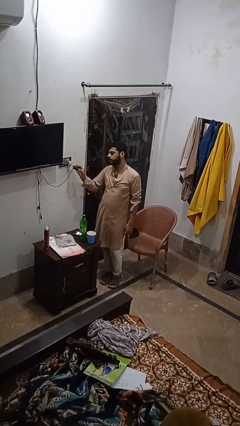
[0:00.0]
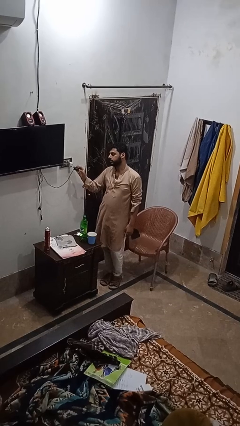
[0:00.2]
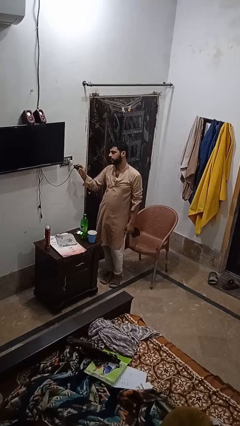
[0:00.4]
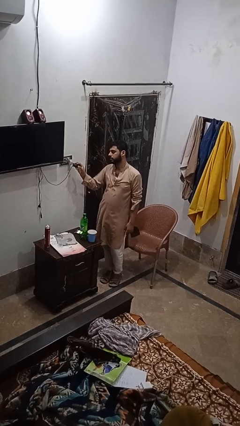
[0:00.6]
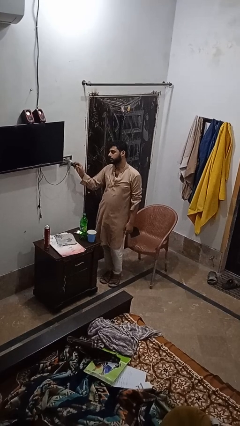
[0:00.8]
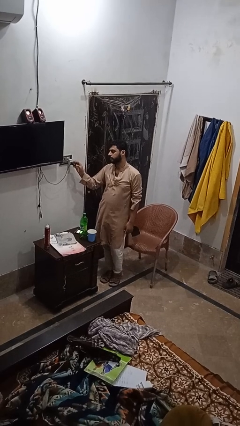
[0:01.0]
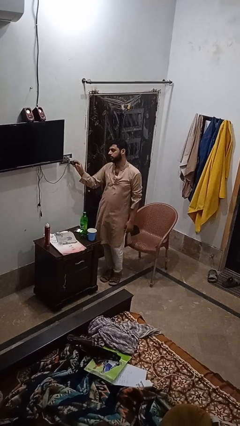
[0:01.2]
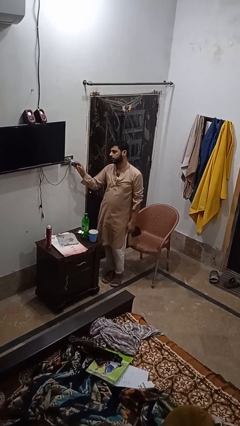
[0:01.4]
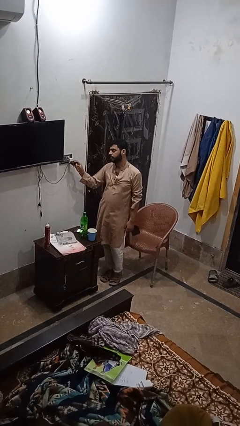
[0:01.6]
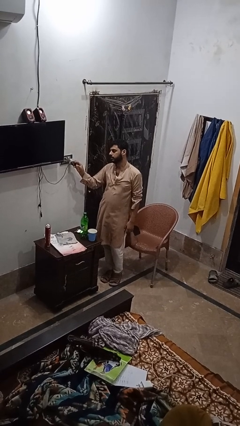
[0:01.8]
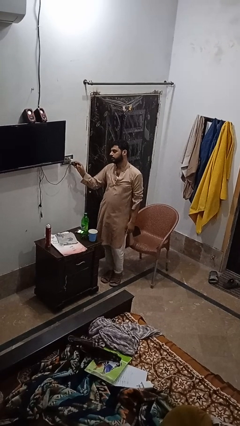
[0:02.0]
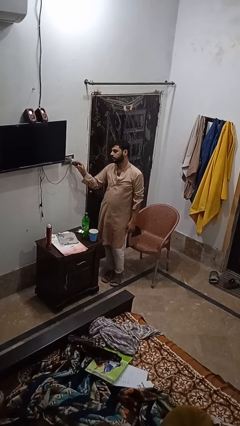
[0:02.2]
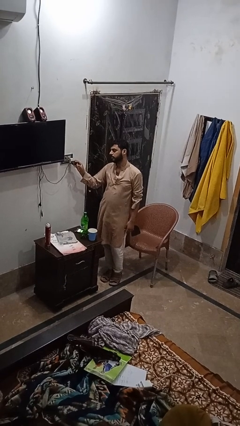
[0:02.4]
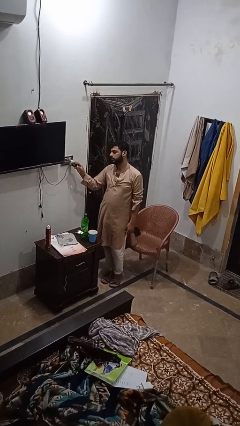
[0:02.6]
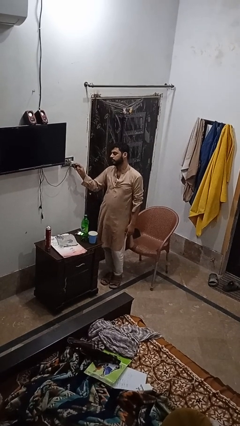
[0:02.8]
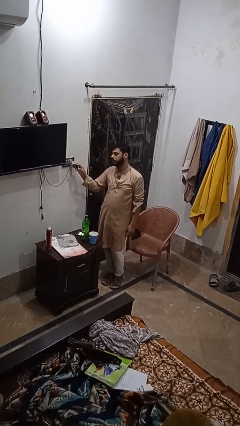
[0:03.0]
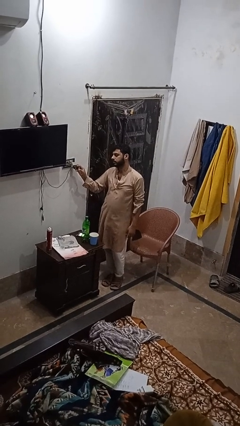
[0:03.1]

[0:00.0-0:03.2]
person plugs into electrical socket

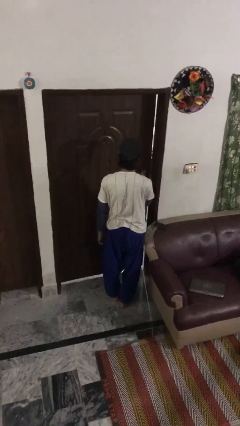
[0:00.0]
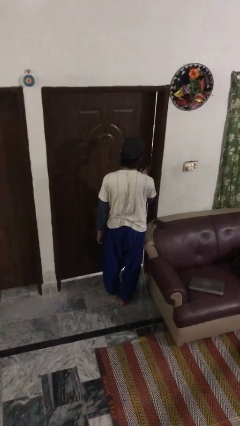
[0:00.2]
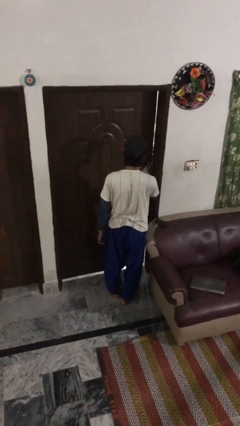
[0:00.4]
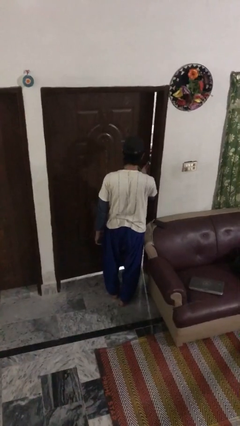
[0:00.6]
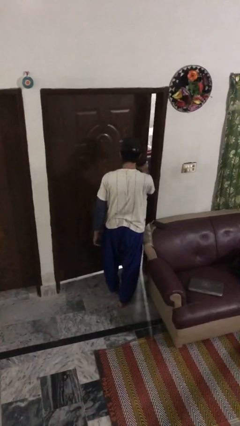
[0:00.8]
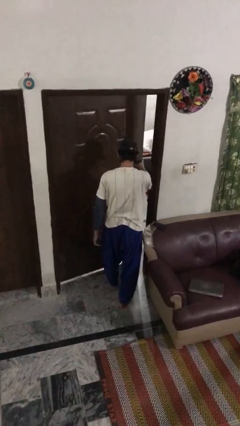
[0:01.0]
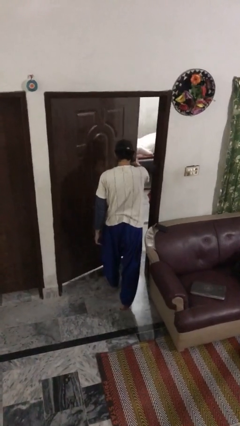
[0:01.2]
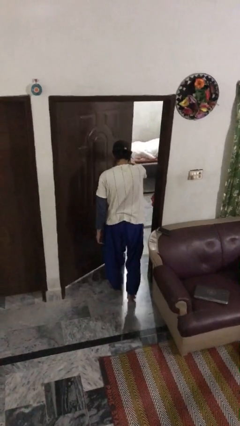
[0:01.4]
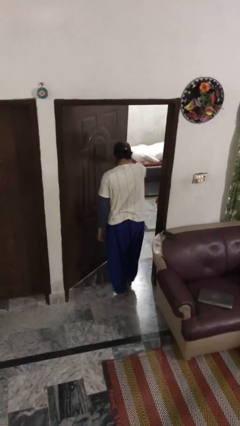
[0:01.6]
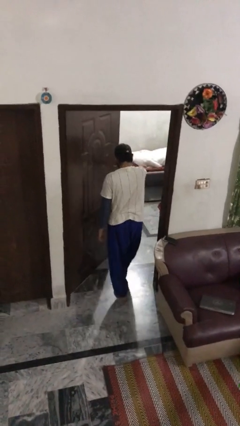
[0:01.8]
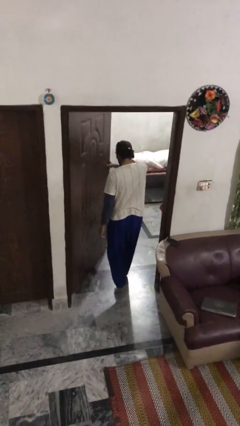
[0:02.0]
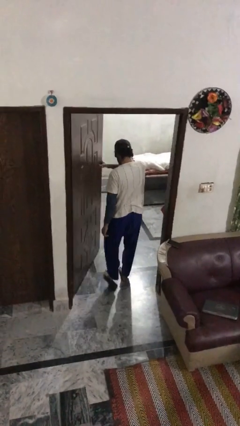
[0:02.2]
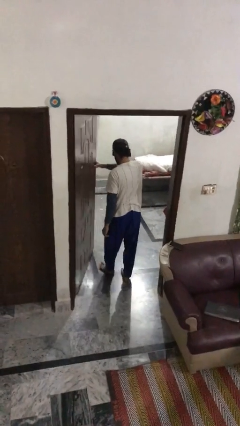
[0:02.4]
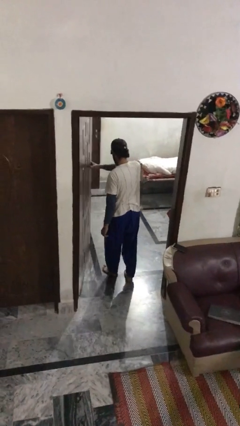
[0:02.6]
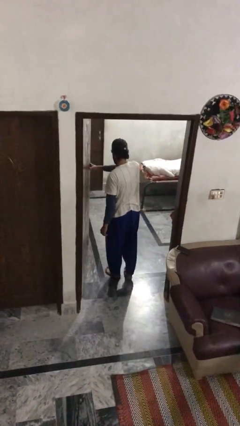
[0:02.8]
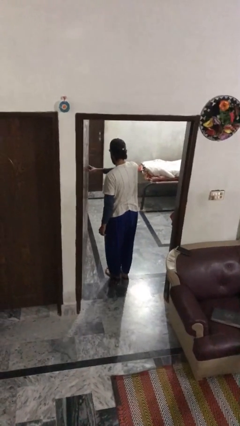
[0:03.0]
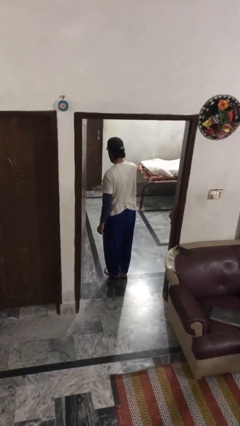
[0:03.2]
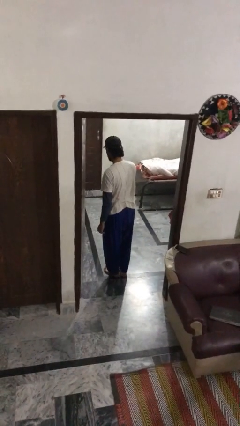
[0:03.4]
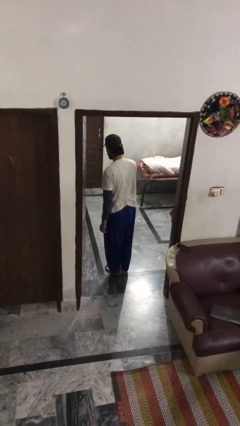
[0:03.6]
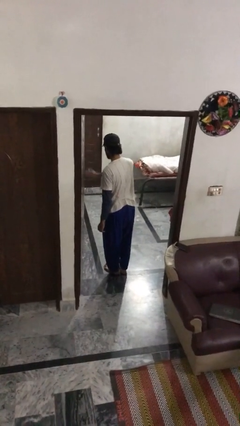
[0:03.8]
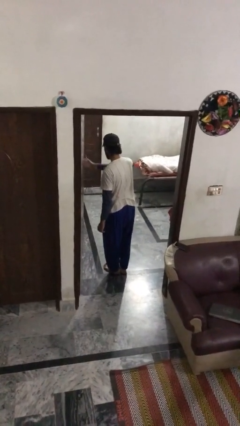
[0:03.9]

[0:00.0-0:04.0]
person opens facility door

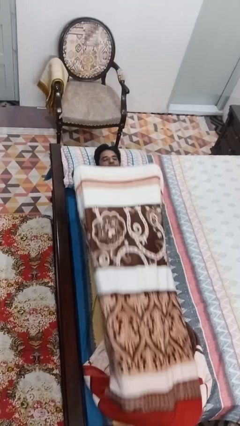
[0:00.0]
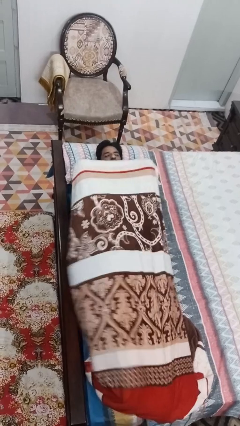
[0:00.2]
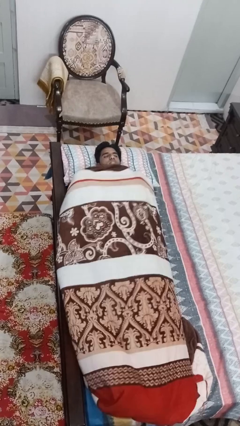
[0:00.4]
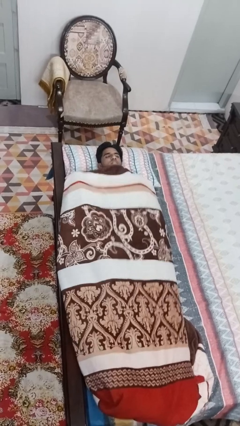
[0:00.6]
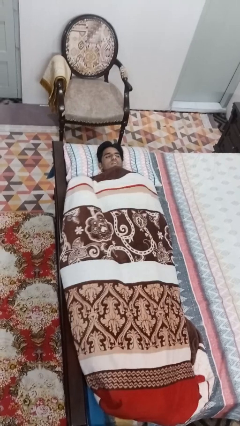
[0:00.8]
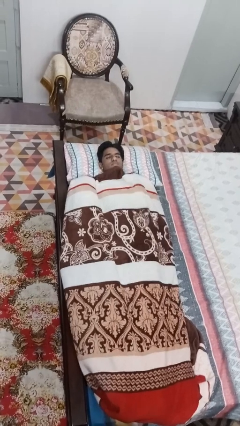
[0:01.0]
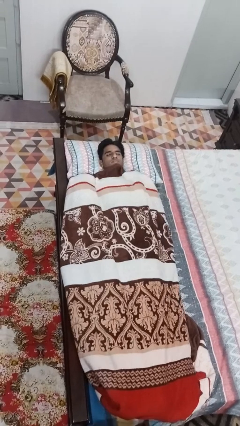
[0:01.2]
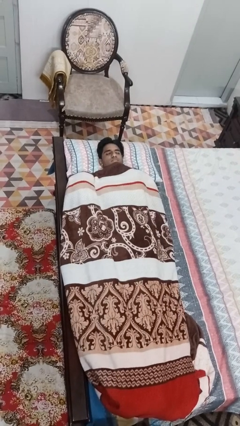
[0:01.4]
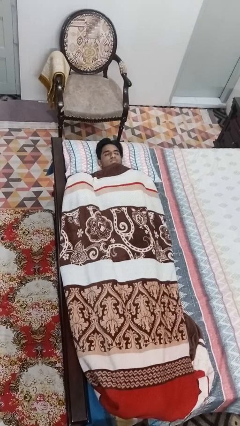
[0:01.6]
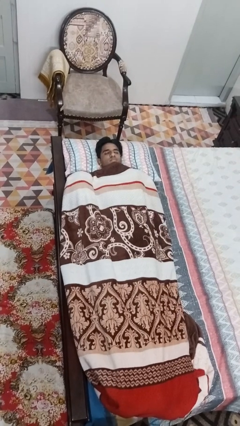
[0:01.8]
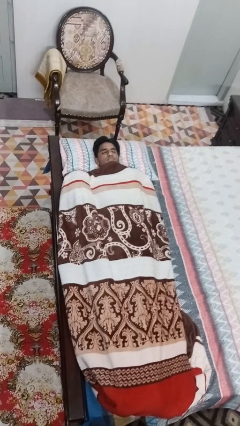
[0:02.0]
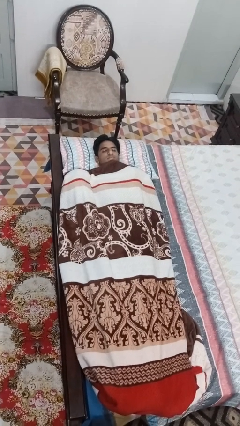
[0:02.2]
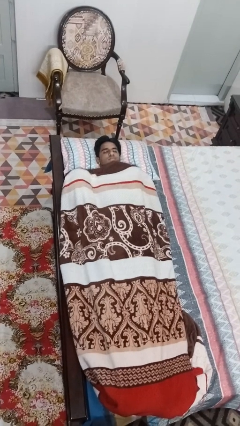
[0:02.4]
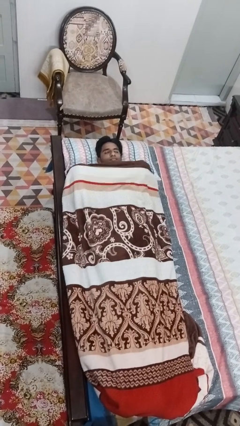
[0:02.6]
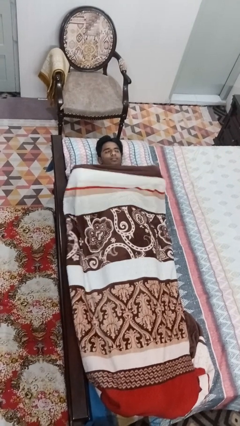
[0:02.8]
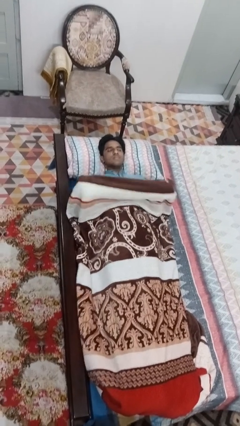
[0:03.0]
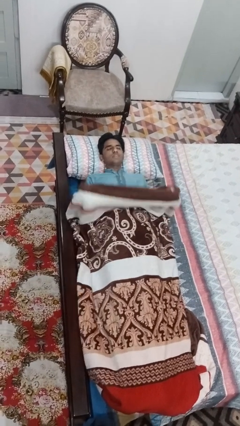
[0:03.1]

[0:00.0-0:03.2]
person covers with blanket

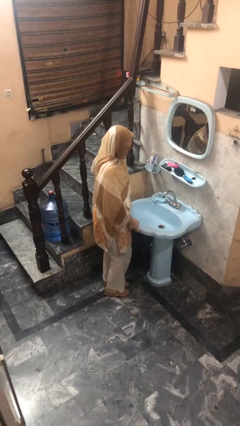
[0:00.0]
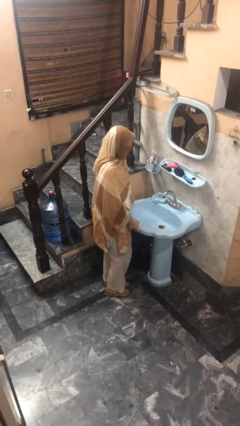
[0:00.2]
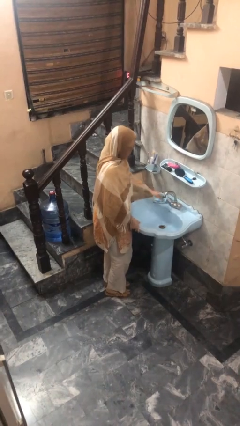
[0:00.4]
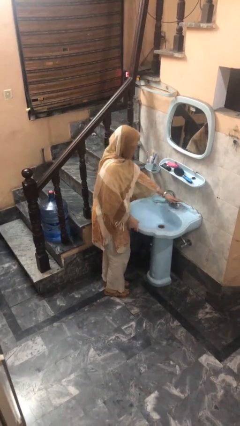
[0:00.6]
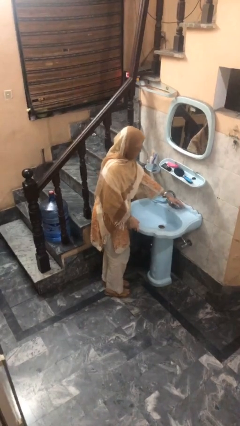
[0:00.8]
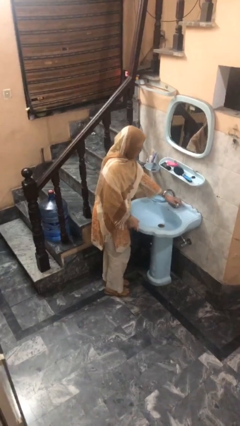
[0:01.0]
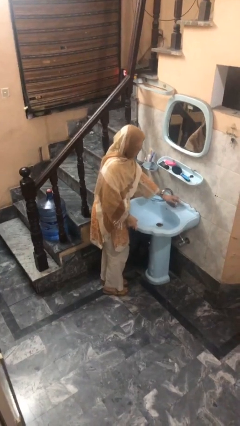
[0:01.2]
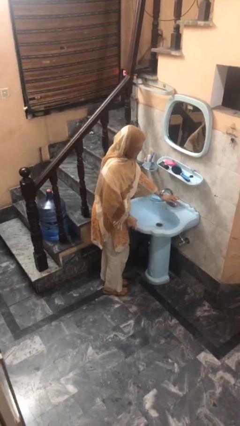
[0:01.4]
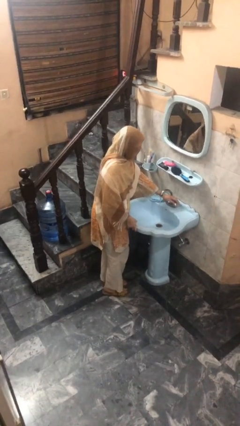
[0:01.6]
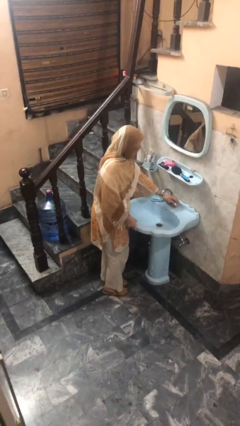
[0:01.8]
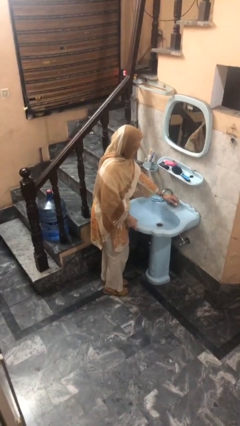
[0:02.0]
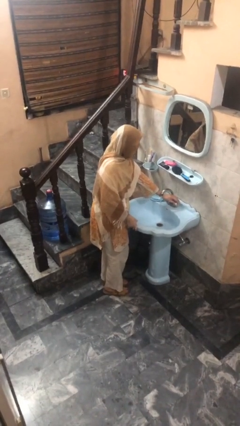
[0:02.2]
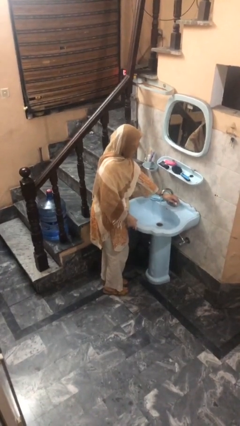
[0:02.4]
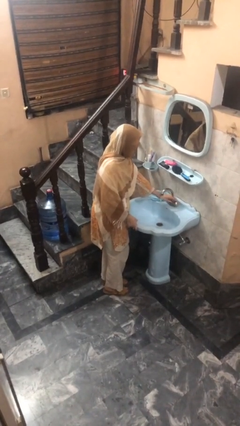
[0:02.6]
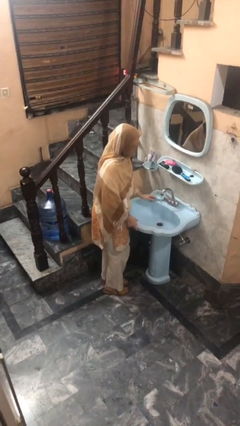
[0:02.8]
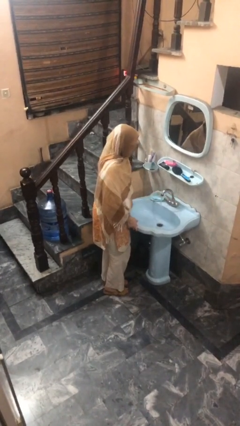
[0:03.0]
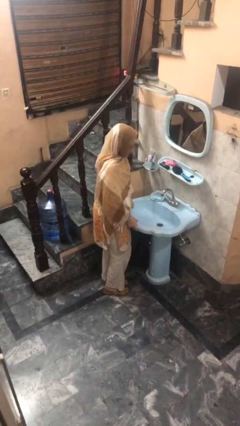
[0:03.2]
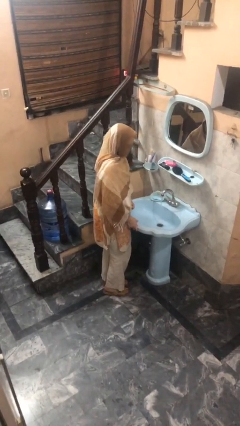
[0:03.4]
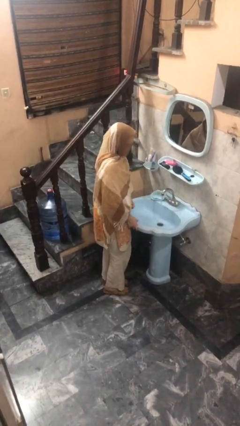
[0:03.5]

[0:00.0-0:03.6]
person turns on faucet

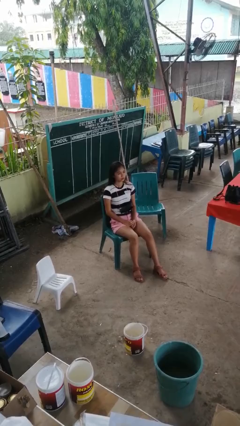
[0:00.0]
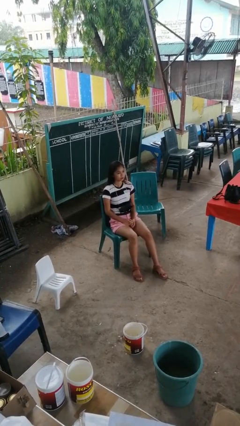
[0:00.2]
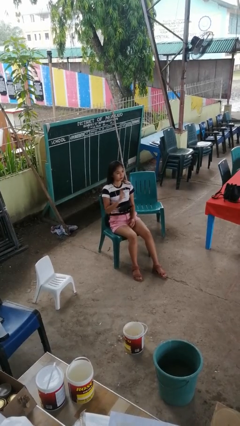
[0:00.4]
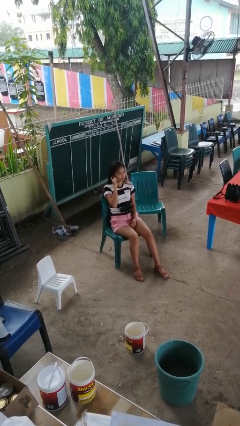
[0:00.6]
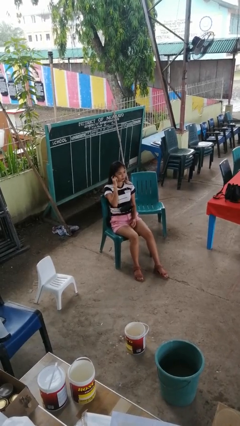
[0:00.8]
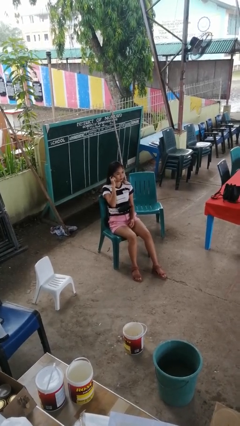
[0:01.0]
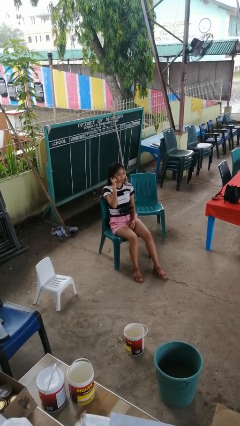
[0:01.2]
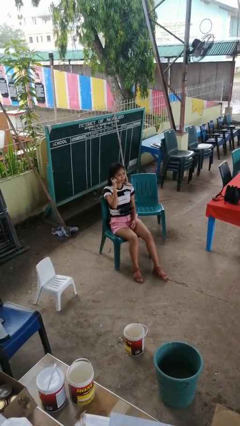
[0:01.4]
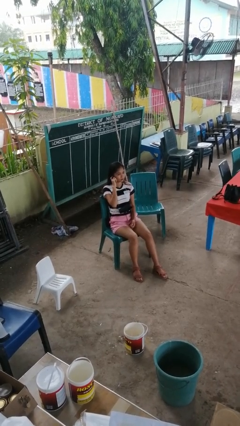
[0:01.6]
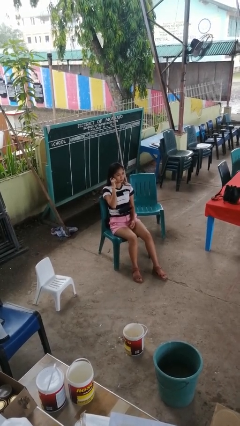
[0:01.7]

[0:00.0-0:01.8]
person gestures listen closely

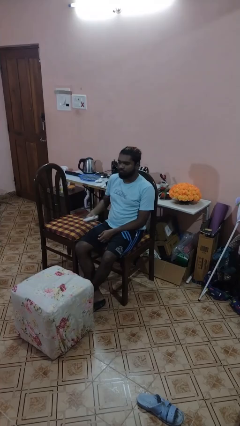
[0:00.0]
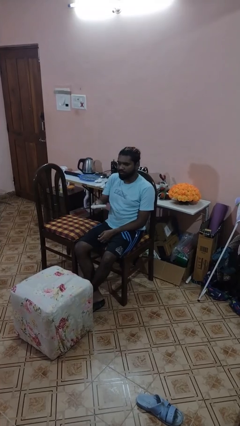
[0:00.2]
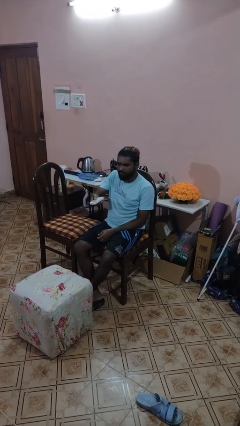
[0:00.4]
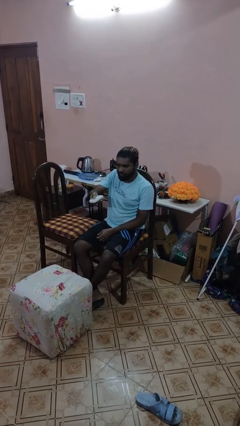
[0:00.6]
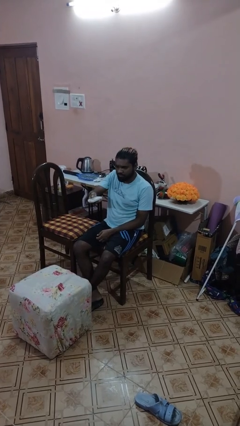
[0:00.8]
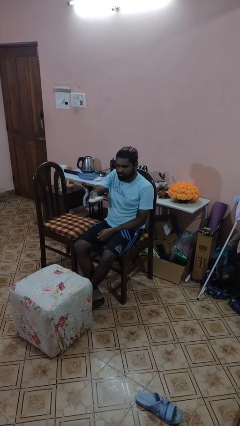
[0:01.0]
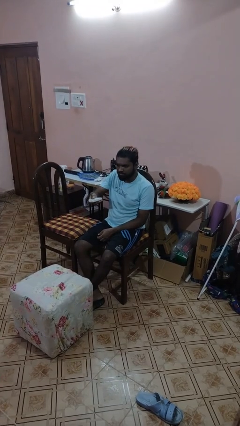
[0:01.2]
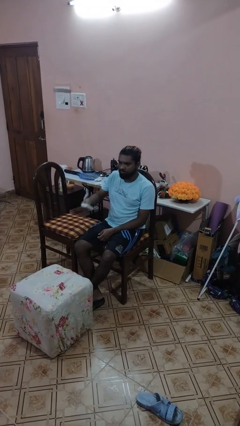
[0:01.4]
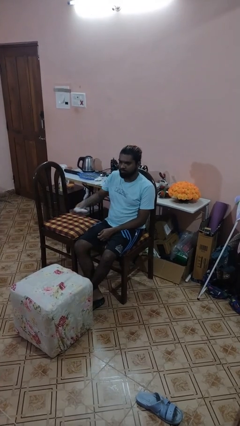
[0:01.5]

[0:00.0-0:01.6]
person uses television remote
